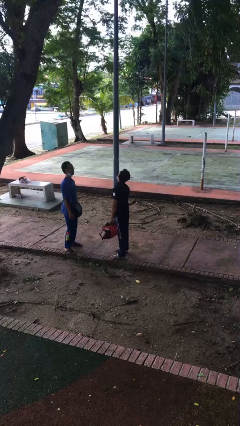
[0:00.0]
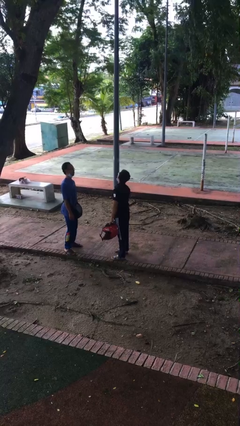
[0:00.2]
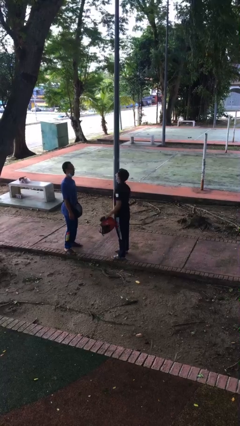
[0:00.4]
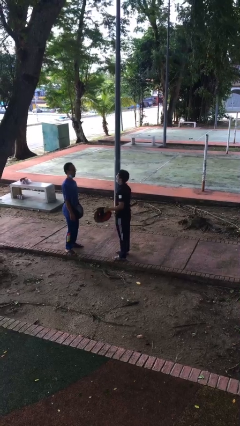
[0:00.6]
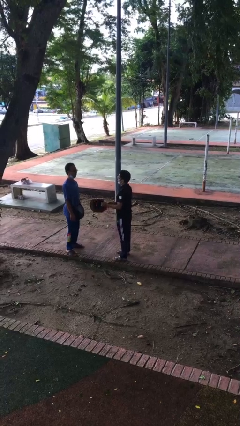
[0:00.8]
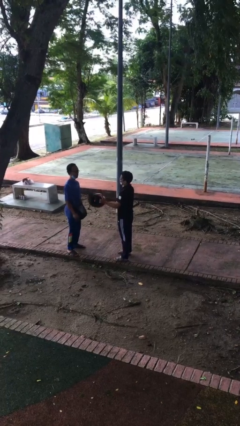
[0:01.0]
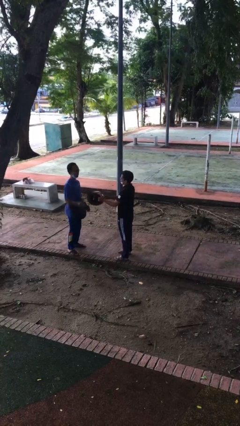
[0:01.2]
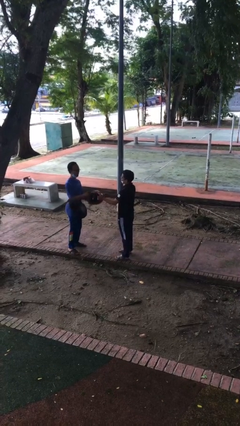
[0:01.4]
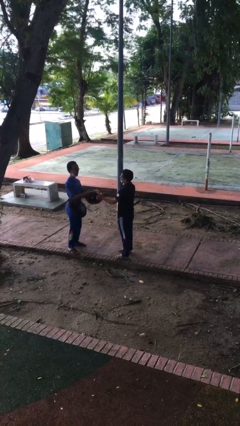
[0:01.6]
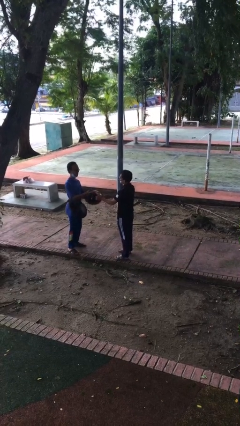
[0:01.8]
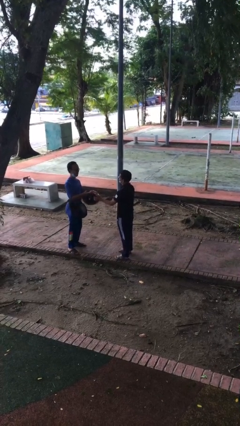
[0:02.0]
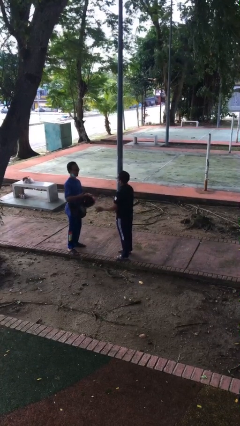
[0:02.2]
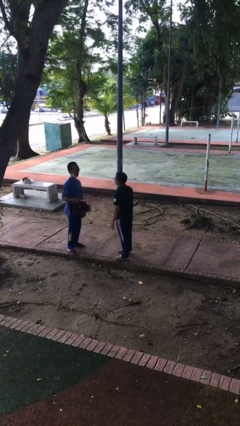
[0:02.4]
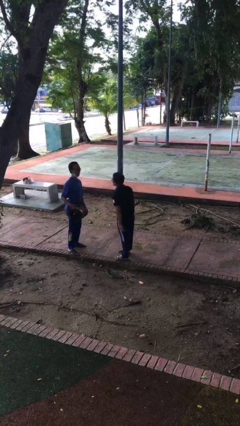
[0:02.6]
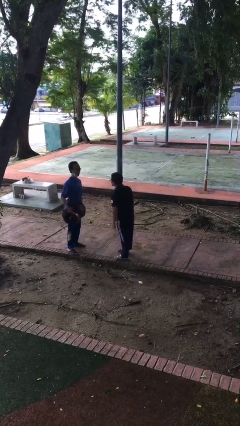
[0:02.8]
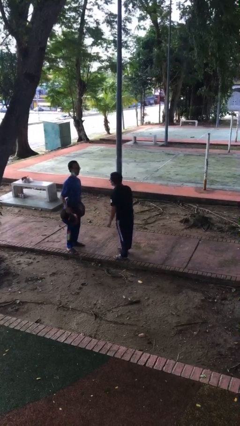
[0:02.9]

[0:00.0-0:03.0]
person transfers object to person

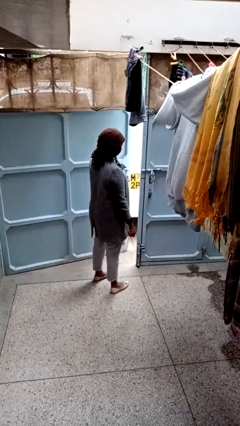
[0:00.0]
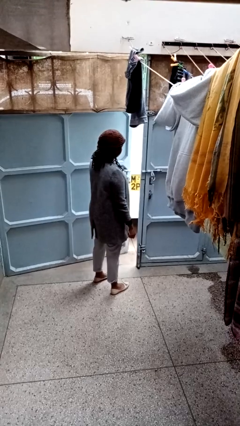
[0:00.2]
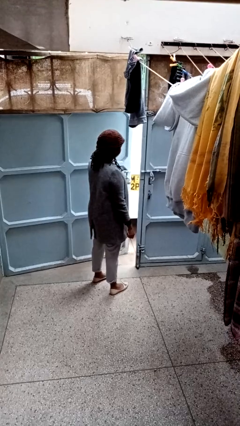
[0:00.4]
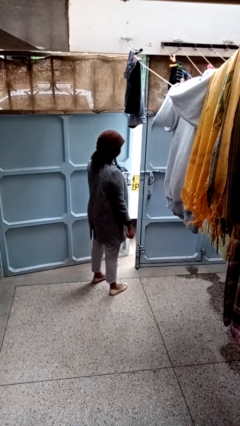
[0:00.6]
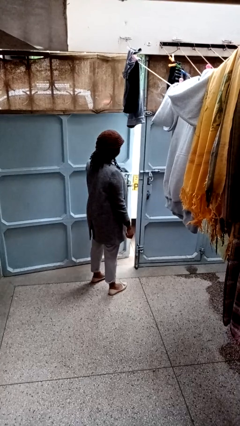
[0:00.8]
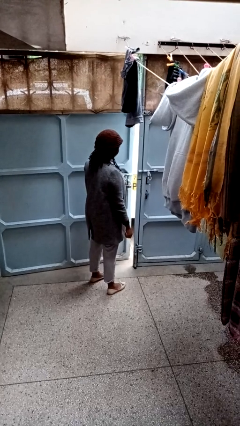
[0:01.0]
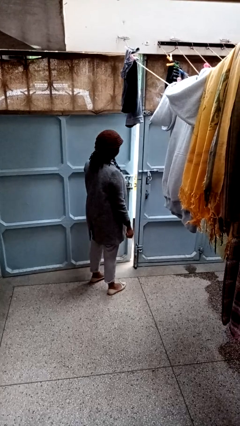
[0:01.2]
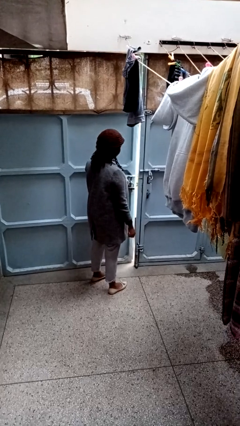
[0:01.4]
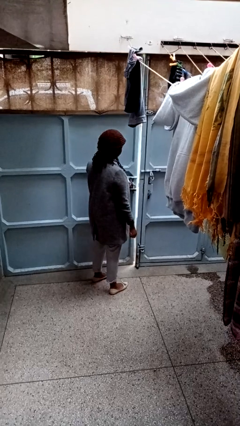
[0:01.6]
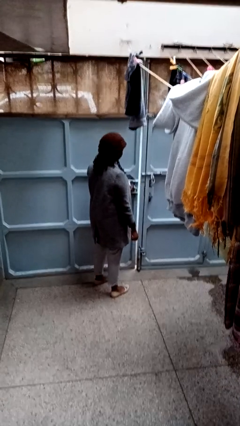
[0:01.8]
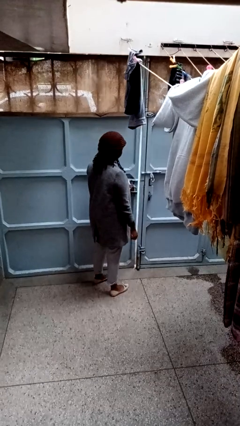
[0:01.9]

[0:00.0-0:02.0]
person closes gate

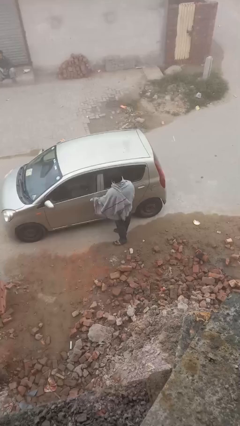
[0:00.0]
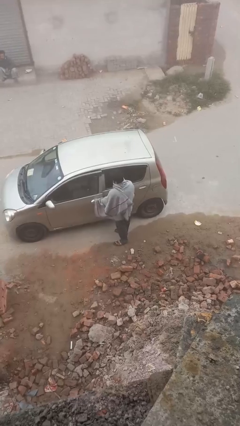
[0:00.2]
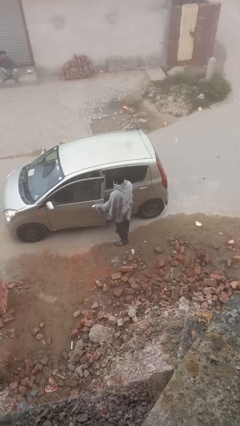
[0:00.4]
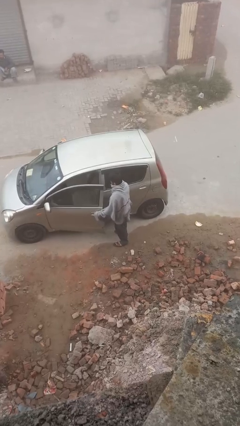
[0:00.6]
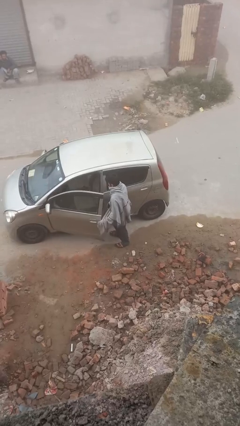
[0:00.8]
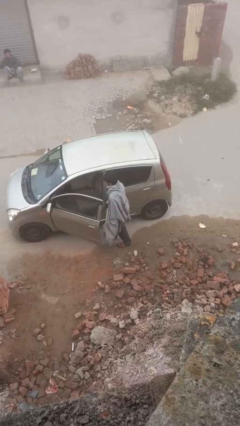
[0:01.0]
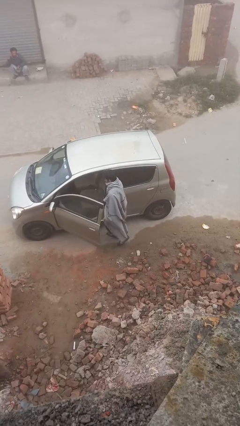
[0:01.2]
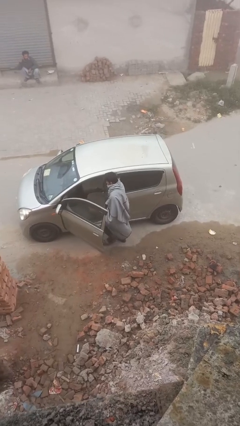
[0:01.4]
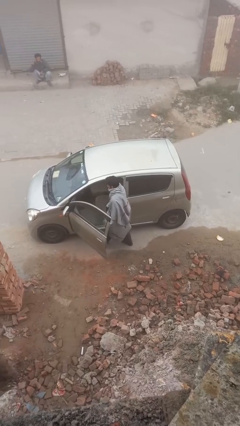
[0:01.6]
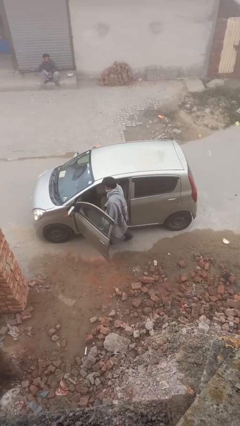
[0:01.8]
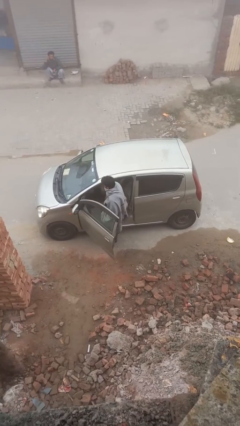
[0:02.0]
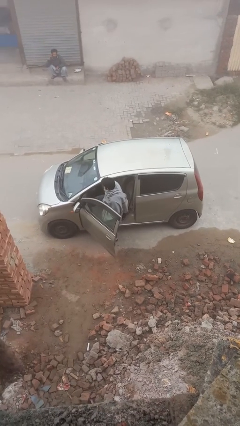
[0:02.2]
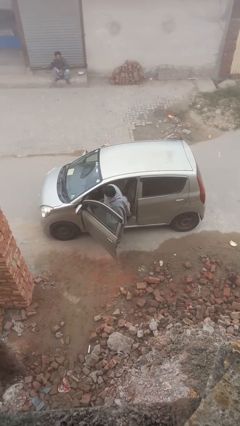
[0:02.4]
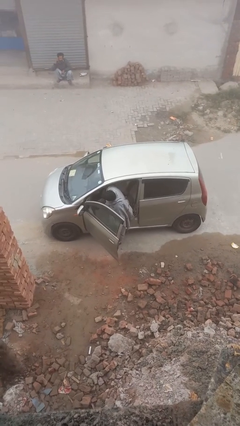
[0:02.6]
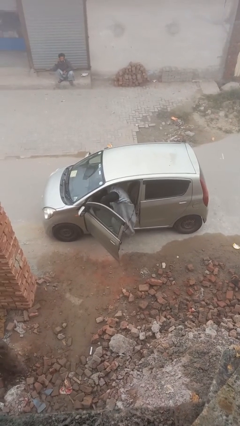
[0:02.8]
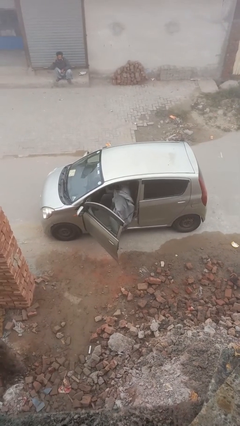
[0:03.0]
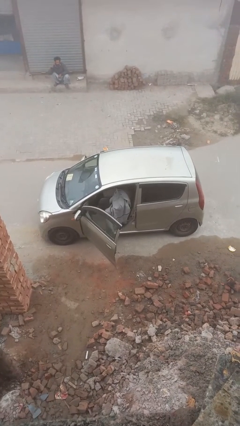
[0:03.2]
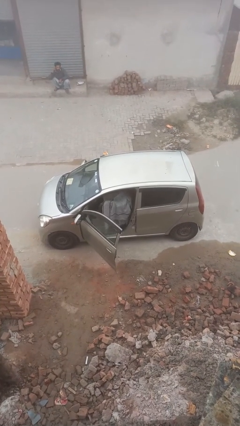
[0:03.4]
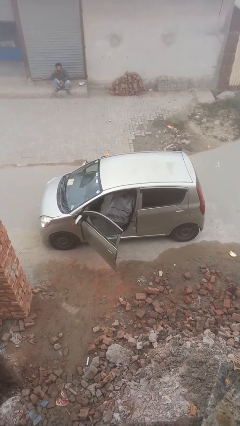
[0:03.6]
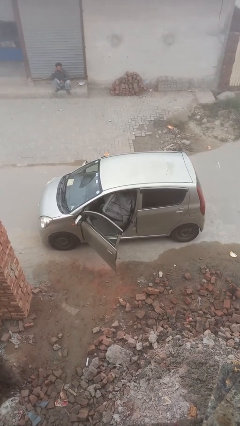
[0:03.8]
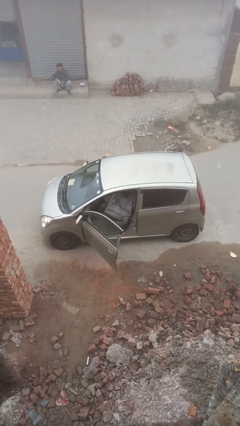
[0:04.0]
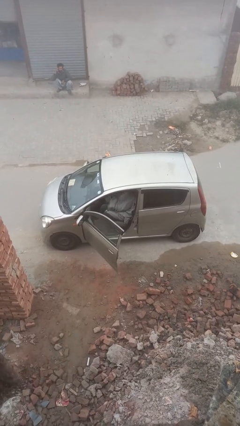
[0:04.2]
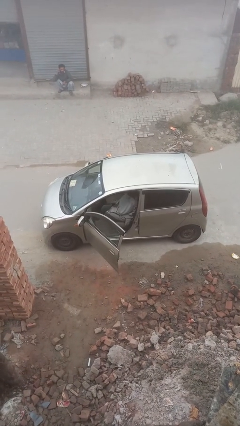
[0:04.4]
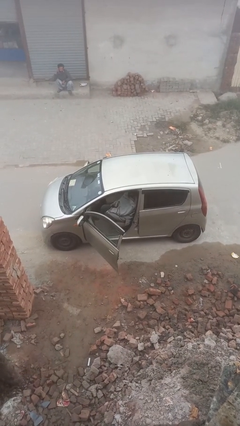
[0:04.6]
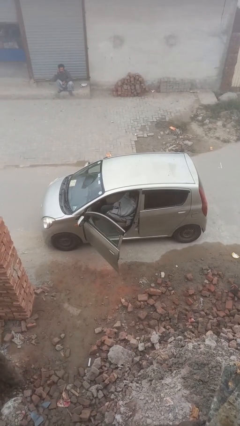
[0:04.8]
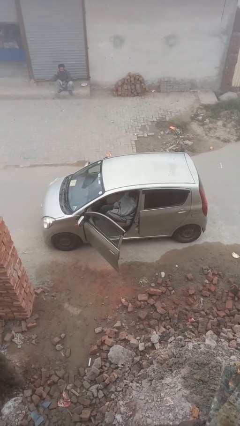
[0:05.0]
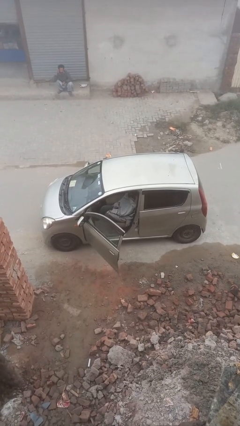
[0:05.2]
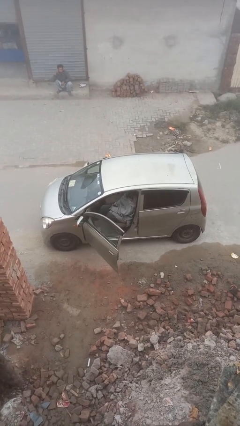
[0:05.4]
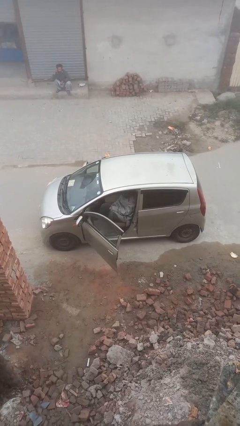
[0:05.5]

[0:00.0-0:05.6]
person enters car

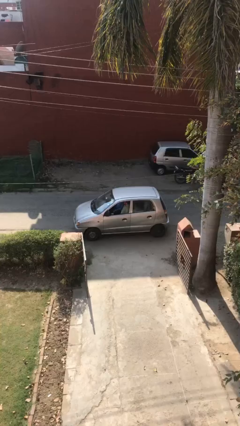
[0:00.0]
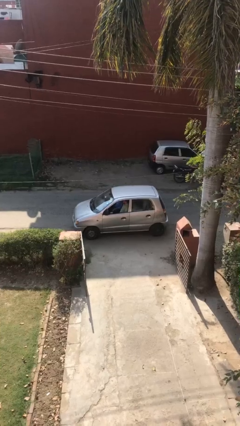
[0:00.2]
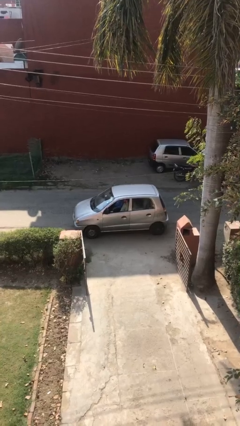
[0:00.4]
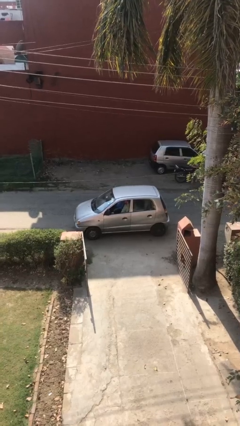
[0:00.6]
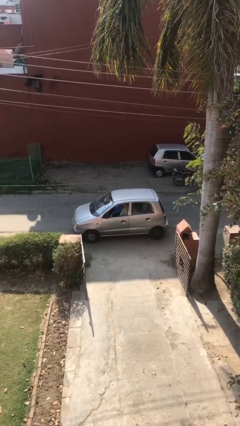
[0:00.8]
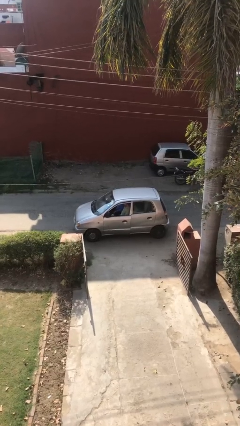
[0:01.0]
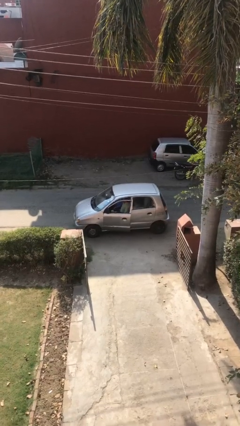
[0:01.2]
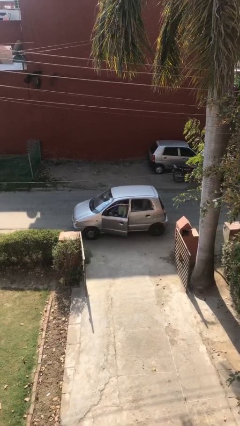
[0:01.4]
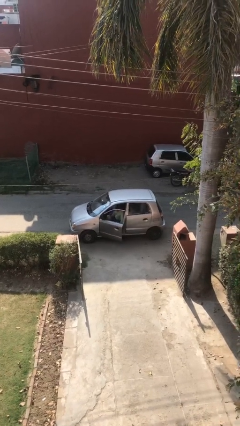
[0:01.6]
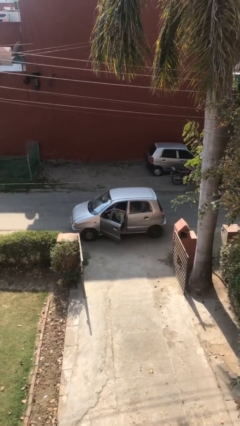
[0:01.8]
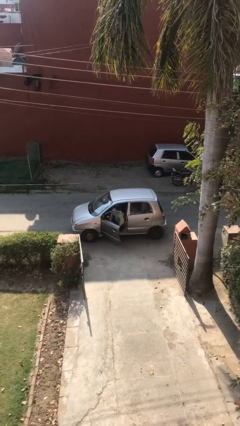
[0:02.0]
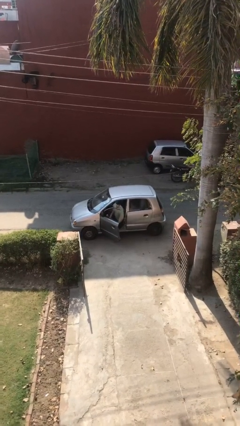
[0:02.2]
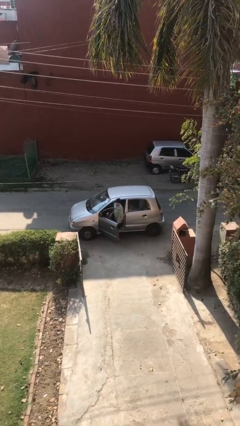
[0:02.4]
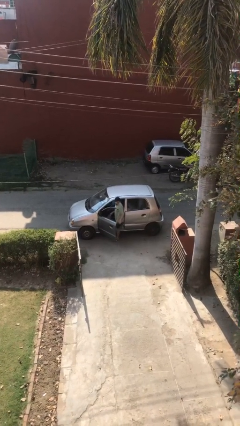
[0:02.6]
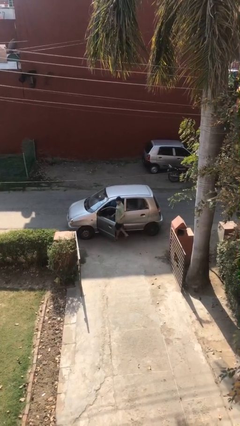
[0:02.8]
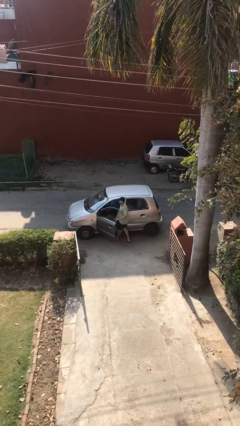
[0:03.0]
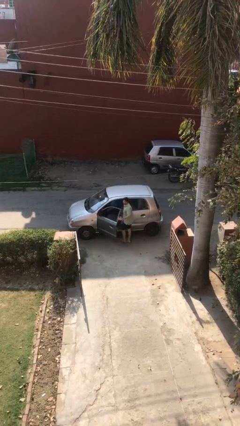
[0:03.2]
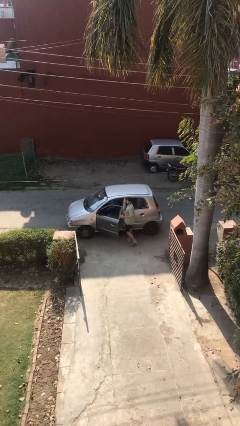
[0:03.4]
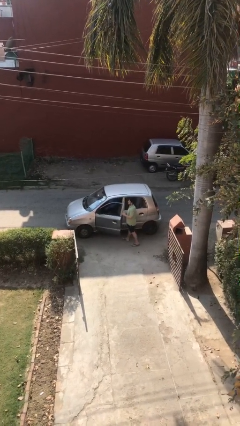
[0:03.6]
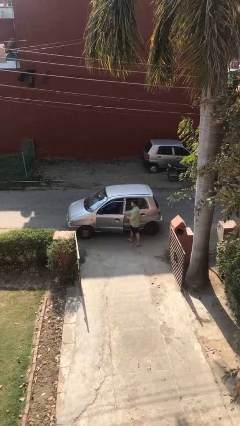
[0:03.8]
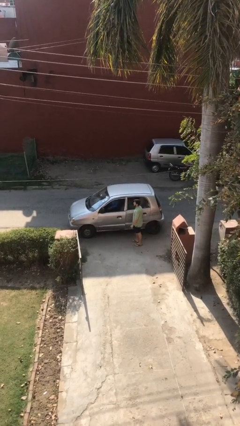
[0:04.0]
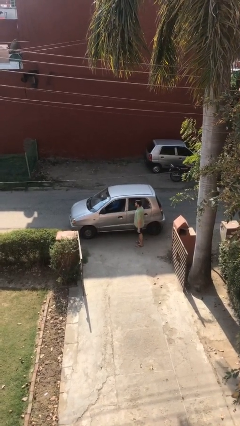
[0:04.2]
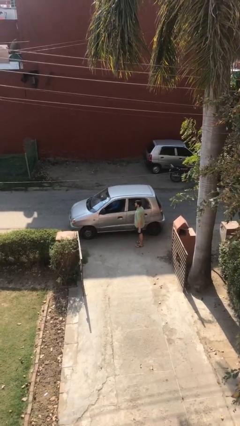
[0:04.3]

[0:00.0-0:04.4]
car drops off person

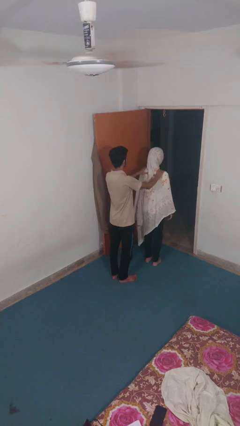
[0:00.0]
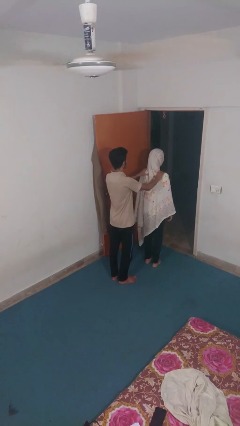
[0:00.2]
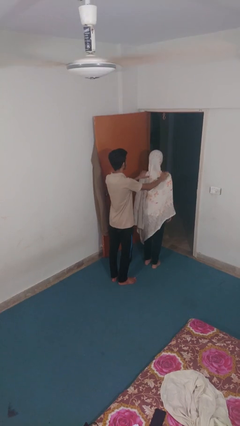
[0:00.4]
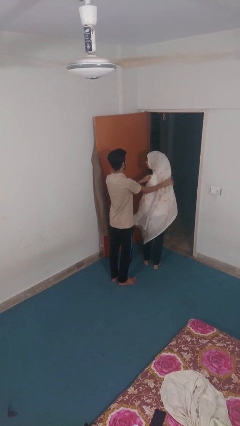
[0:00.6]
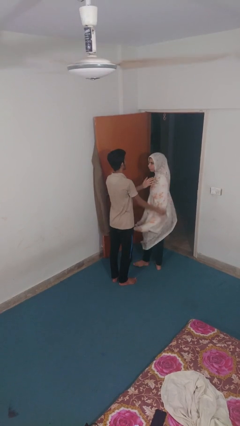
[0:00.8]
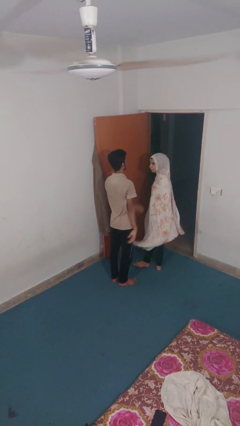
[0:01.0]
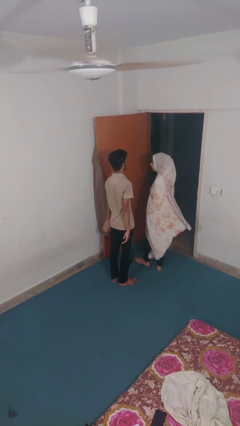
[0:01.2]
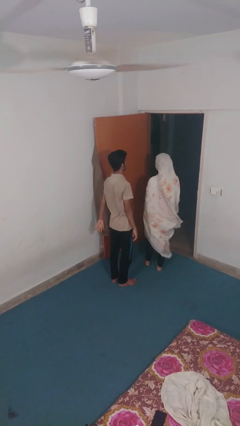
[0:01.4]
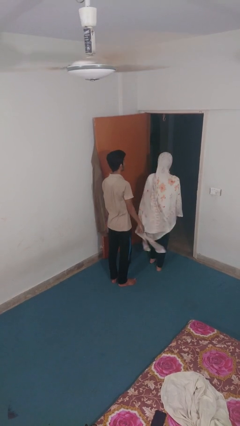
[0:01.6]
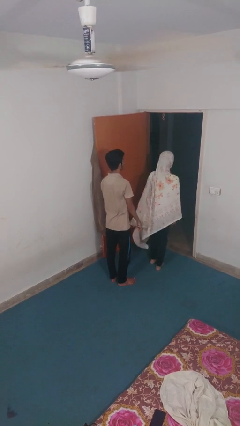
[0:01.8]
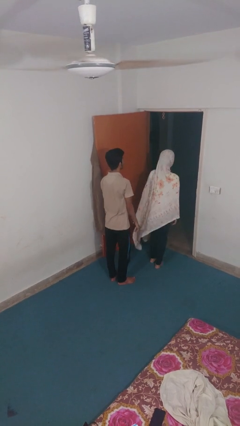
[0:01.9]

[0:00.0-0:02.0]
person spins person around

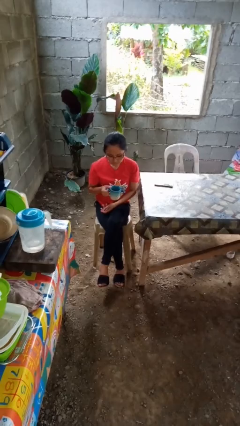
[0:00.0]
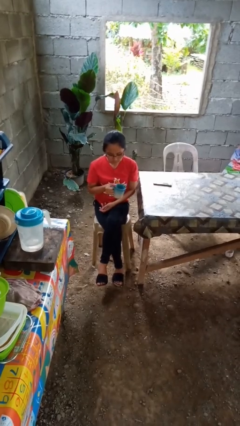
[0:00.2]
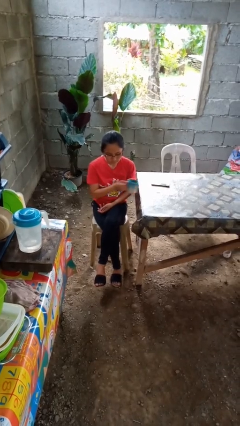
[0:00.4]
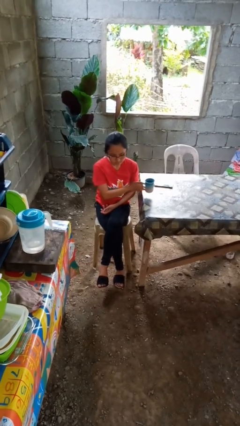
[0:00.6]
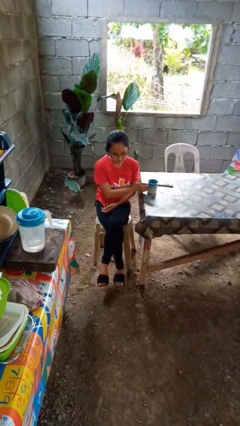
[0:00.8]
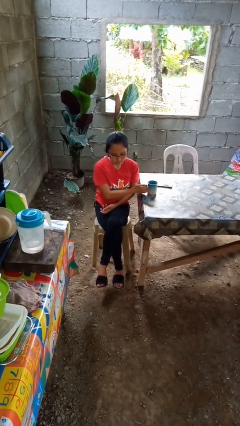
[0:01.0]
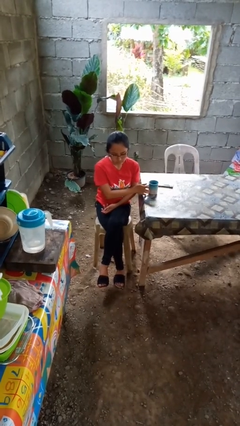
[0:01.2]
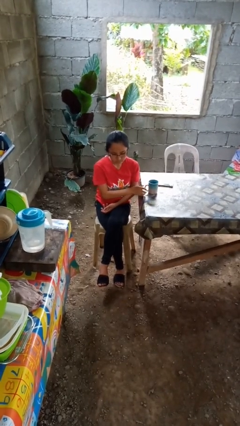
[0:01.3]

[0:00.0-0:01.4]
person puts down object on table
